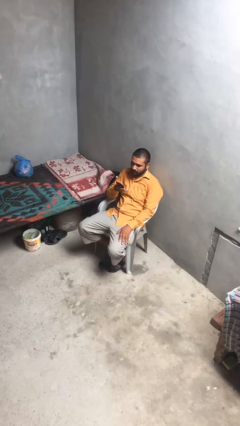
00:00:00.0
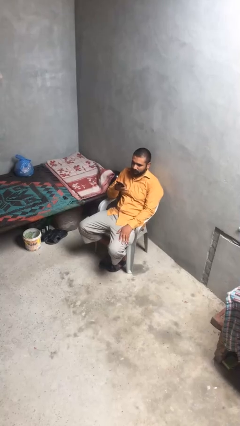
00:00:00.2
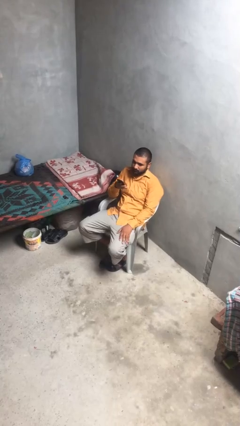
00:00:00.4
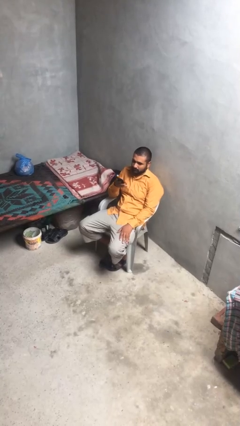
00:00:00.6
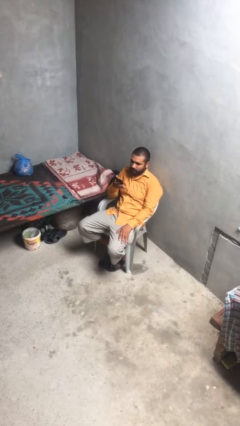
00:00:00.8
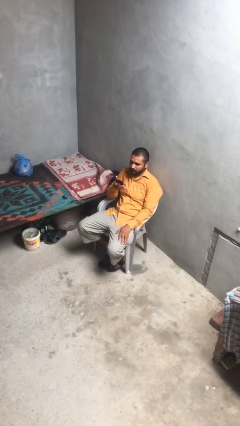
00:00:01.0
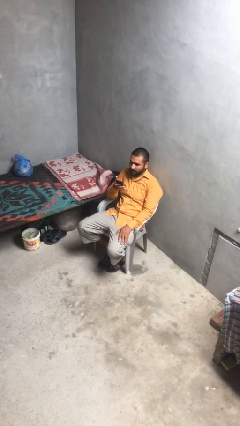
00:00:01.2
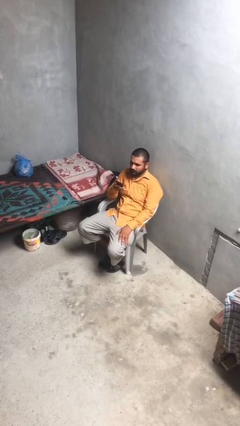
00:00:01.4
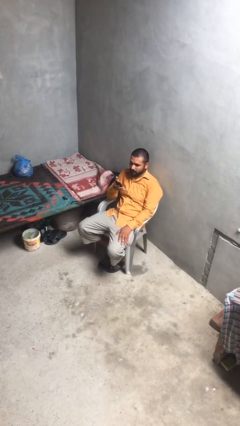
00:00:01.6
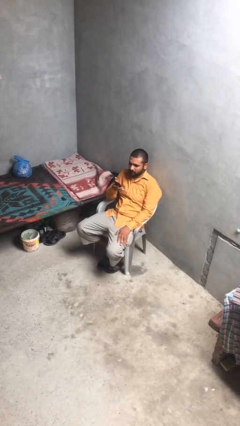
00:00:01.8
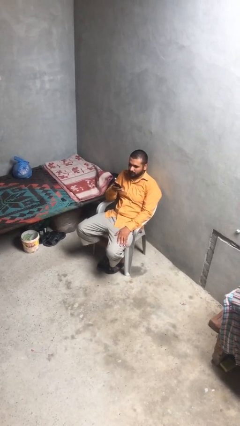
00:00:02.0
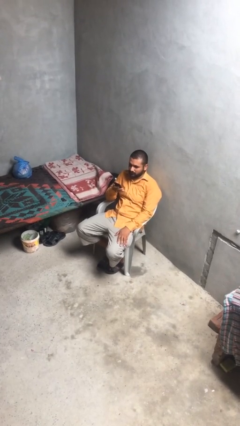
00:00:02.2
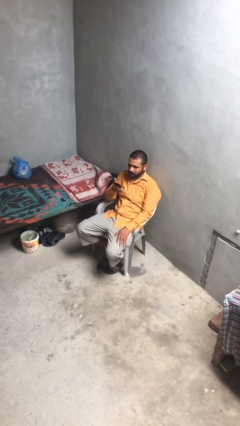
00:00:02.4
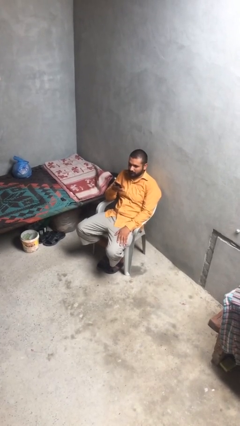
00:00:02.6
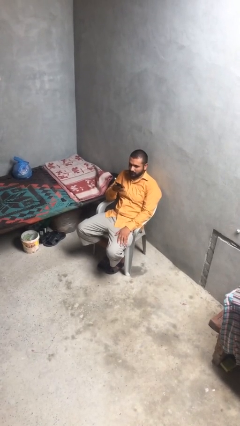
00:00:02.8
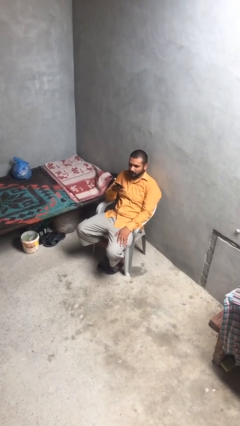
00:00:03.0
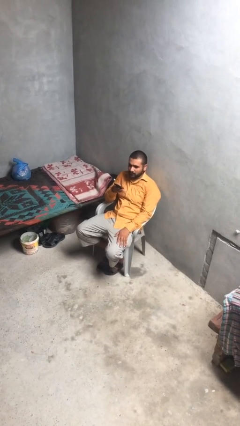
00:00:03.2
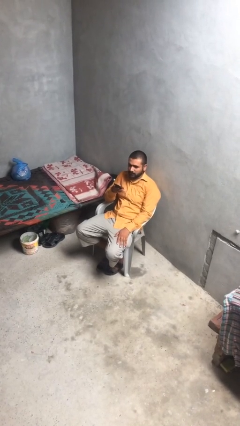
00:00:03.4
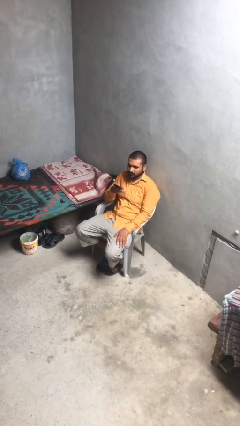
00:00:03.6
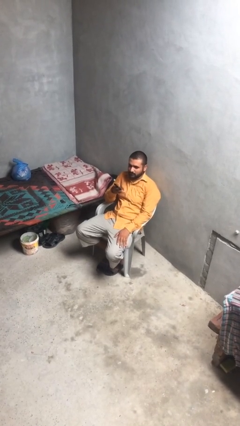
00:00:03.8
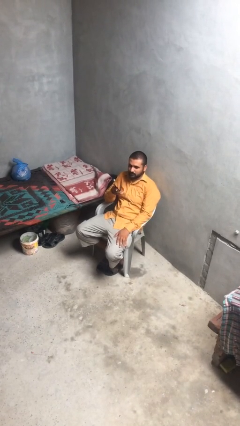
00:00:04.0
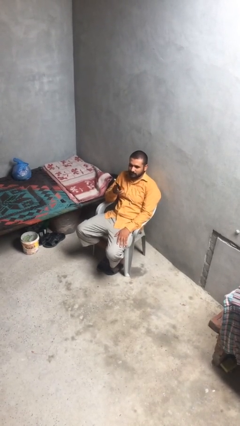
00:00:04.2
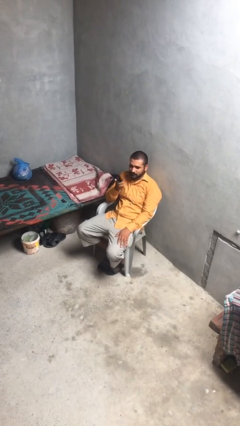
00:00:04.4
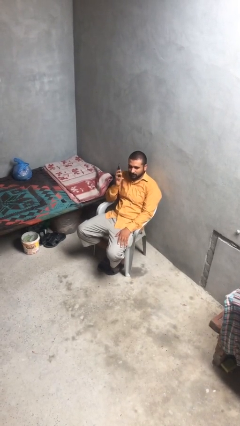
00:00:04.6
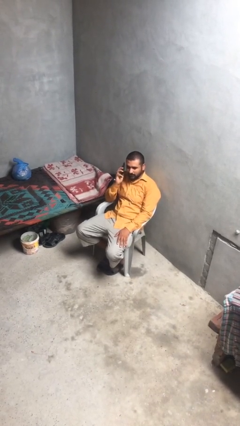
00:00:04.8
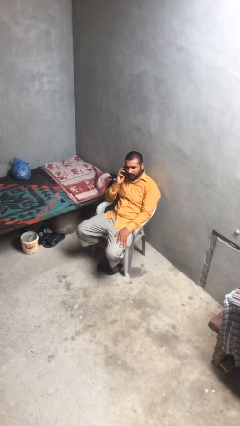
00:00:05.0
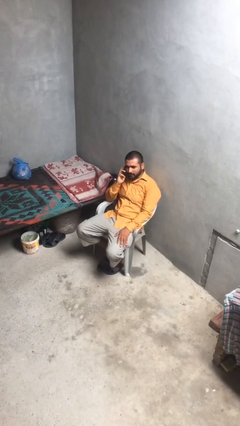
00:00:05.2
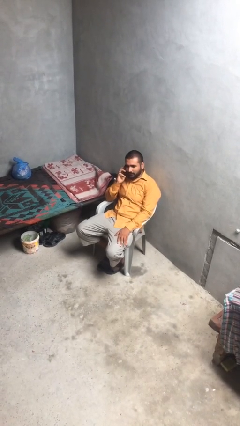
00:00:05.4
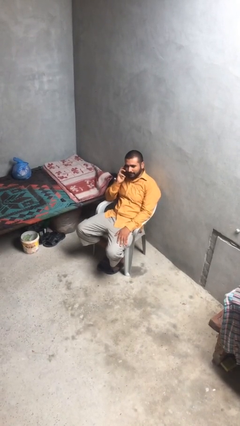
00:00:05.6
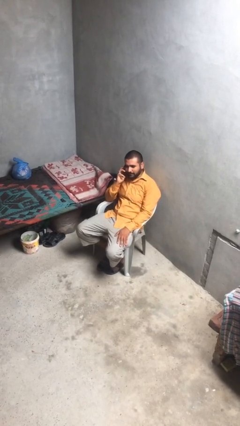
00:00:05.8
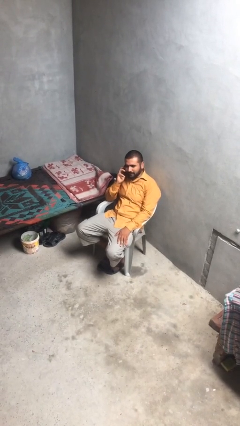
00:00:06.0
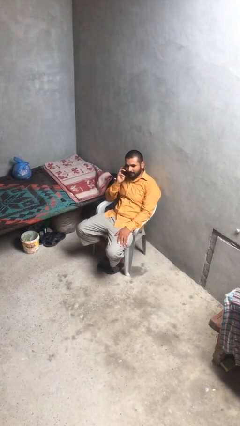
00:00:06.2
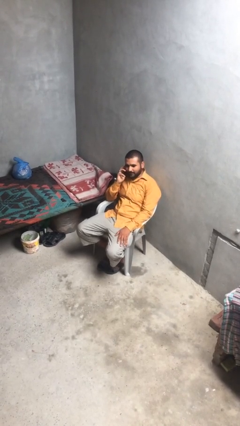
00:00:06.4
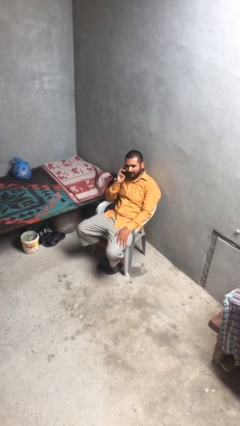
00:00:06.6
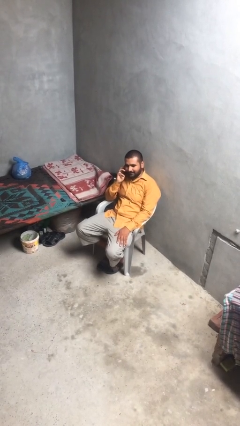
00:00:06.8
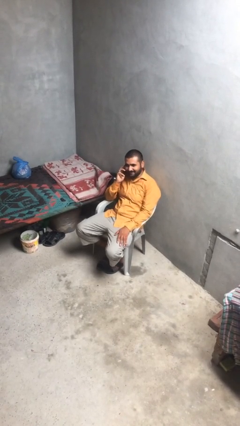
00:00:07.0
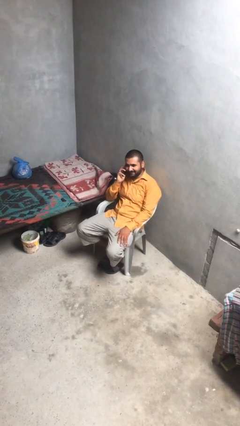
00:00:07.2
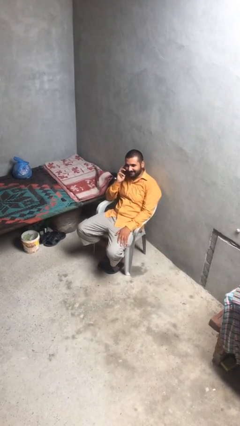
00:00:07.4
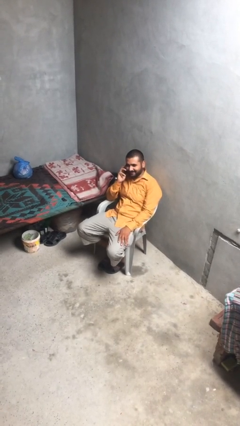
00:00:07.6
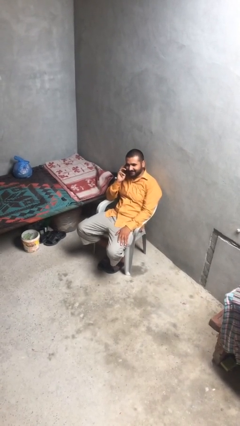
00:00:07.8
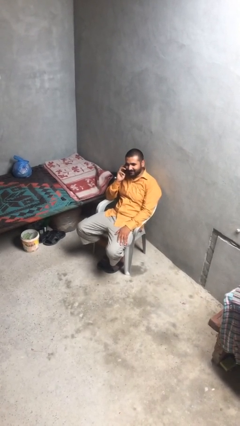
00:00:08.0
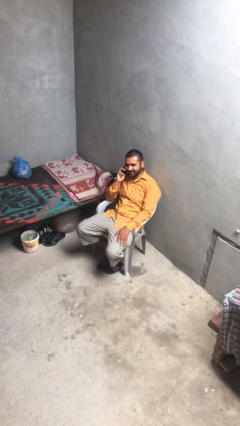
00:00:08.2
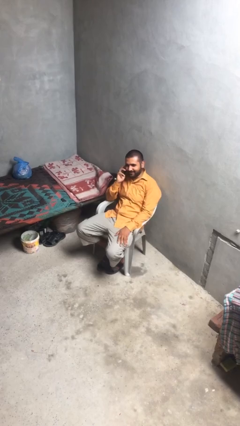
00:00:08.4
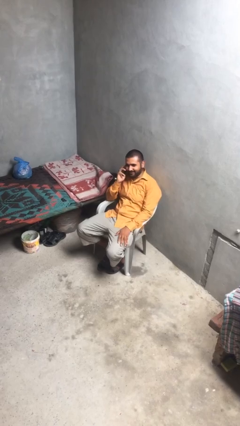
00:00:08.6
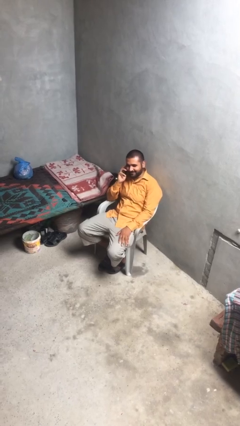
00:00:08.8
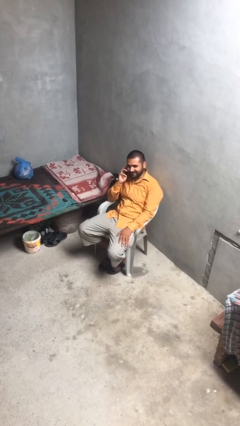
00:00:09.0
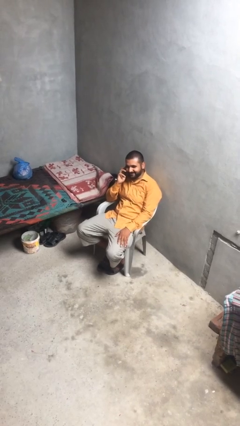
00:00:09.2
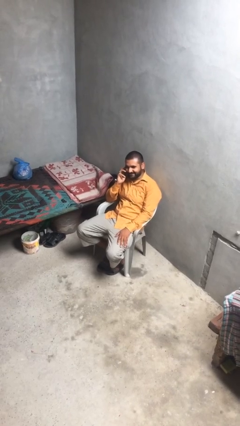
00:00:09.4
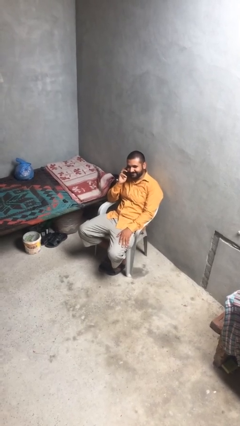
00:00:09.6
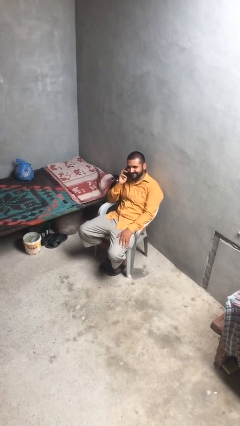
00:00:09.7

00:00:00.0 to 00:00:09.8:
person talks on phone

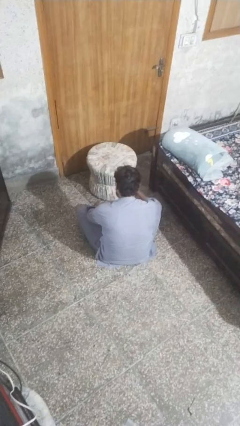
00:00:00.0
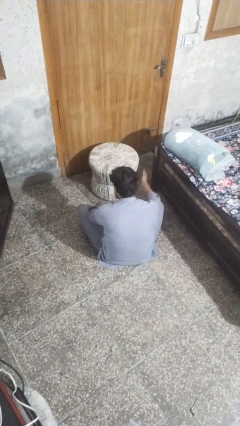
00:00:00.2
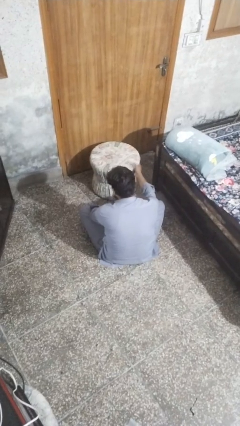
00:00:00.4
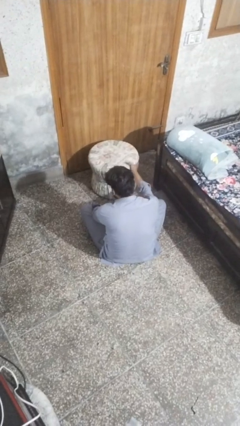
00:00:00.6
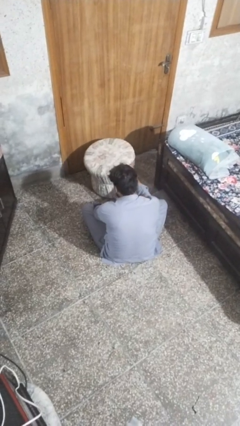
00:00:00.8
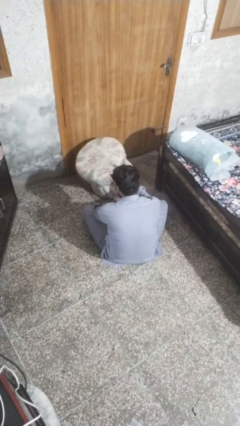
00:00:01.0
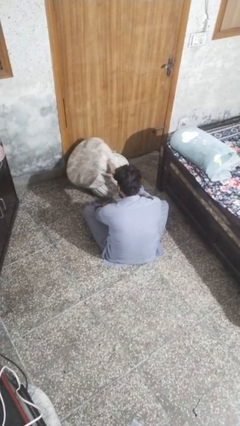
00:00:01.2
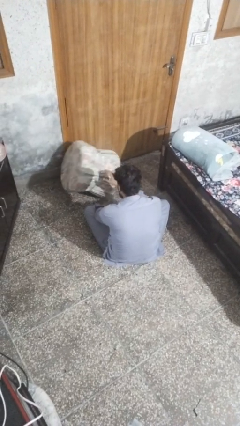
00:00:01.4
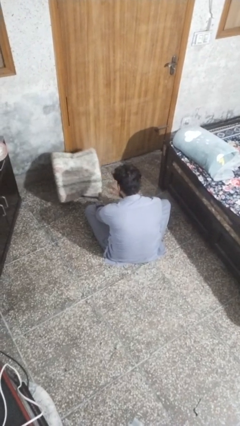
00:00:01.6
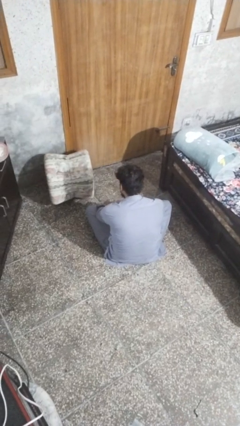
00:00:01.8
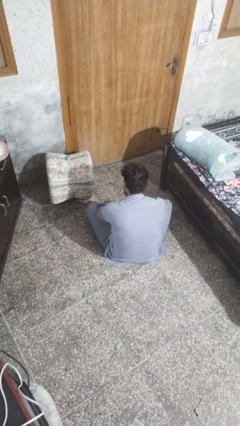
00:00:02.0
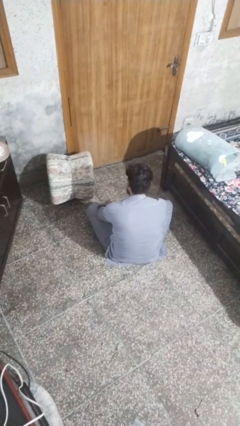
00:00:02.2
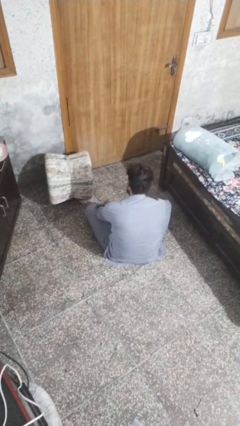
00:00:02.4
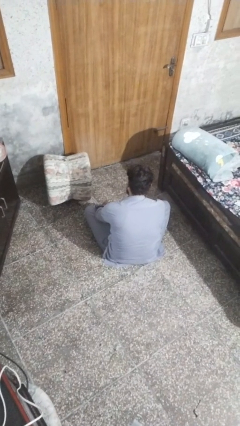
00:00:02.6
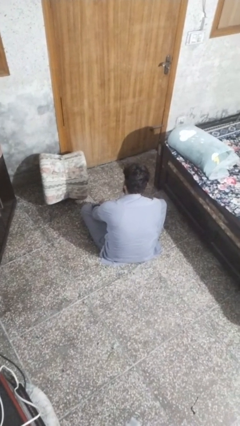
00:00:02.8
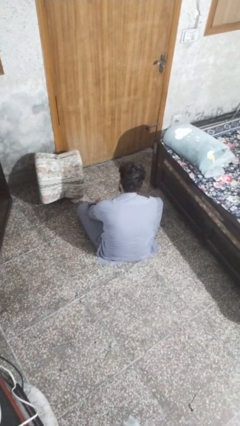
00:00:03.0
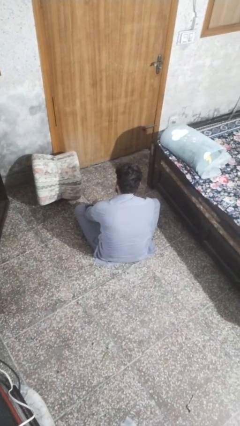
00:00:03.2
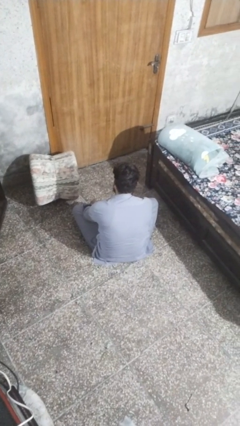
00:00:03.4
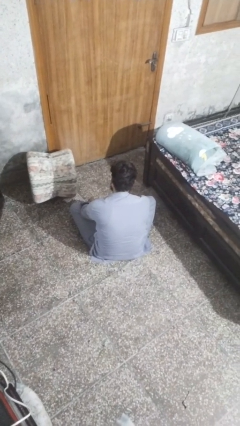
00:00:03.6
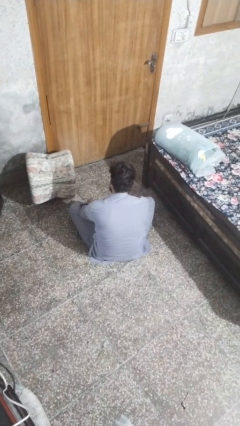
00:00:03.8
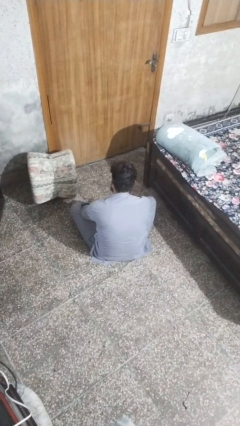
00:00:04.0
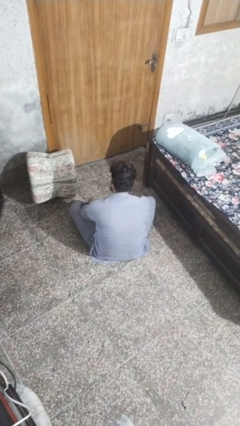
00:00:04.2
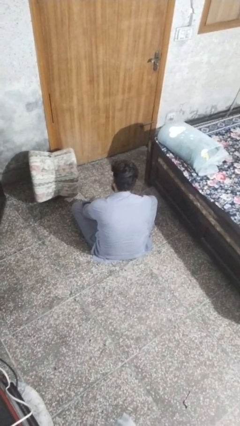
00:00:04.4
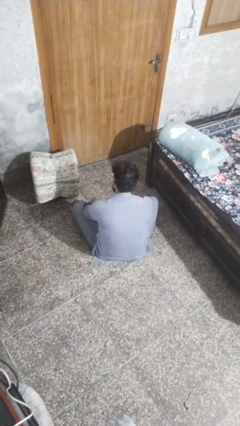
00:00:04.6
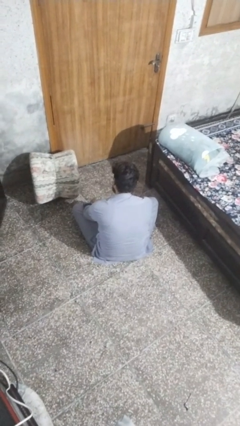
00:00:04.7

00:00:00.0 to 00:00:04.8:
person knocks over furniture

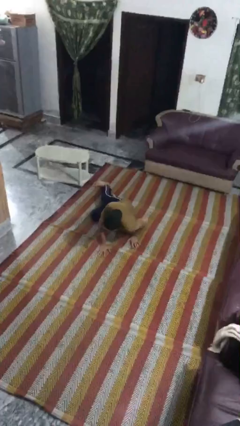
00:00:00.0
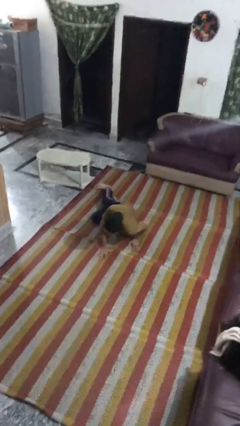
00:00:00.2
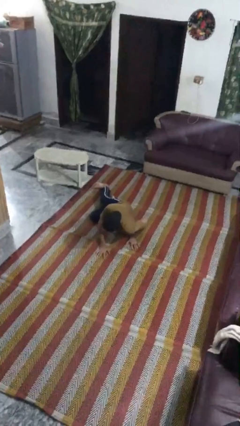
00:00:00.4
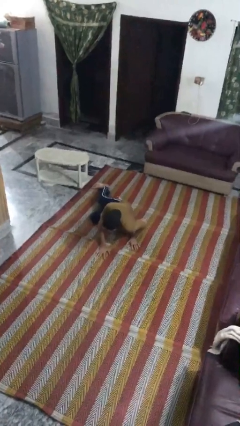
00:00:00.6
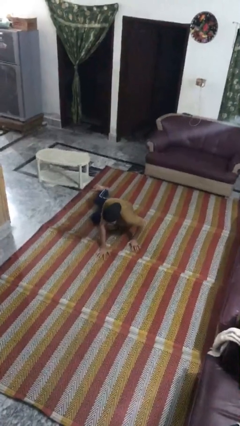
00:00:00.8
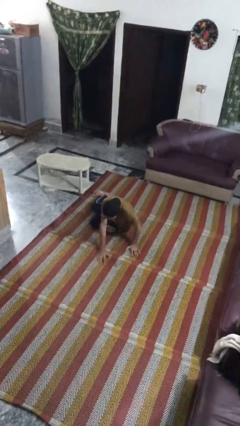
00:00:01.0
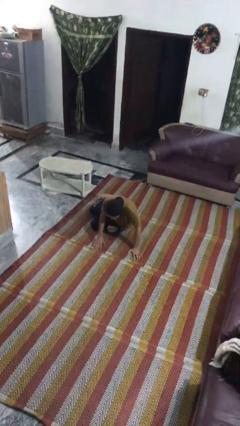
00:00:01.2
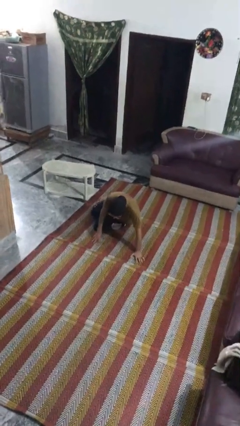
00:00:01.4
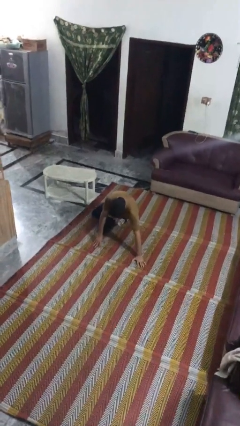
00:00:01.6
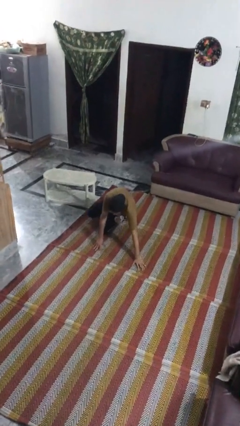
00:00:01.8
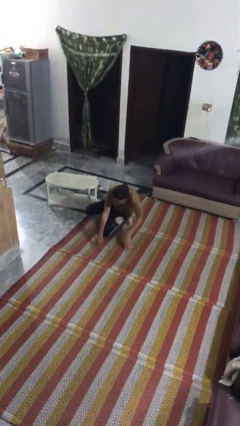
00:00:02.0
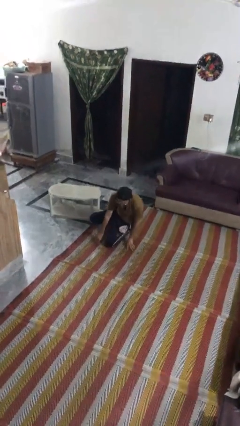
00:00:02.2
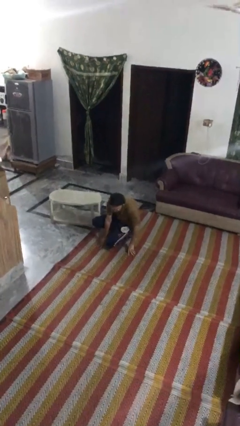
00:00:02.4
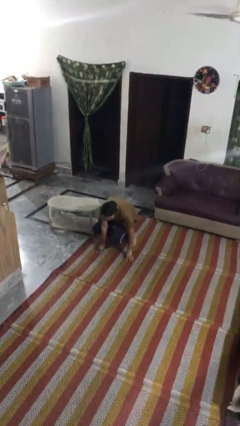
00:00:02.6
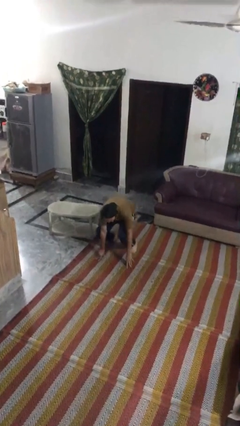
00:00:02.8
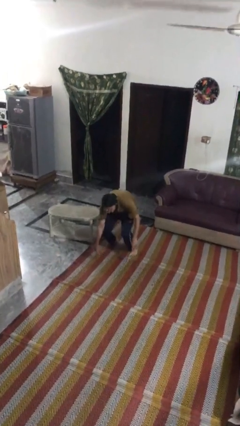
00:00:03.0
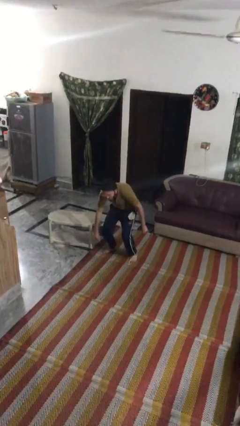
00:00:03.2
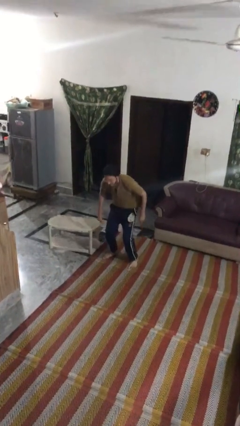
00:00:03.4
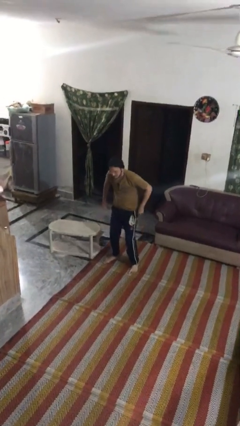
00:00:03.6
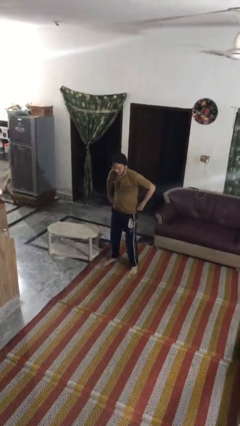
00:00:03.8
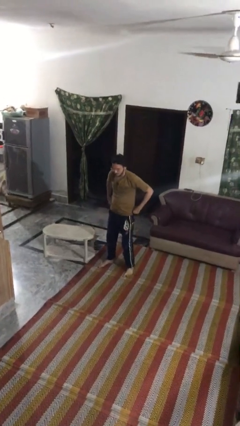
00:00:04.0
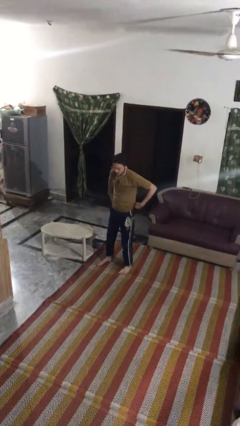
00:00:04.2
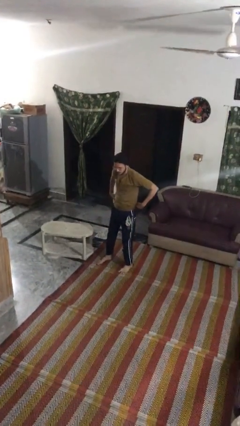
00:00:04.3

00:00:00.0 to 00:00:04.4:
person stands up from floor
